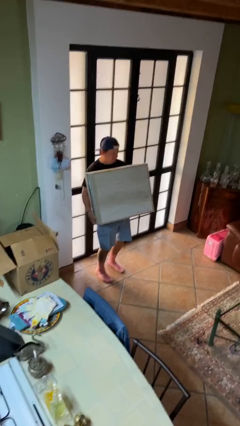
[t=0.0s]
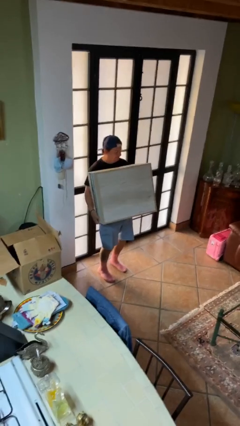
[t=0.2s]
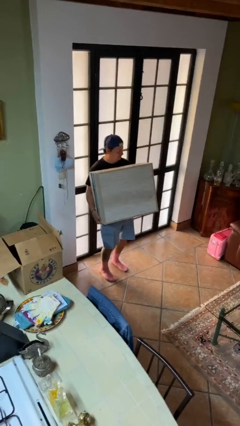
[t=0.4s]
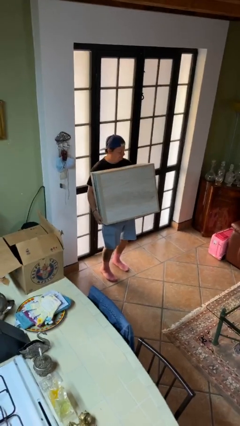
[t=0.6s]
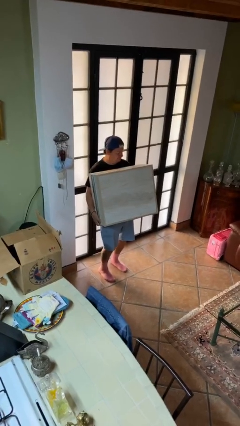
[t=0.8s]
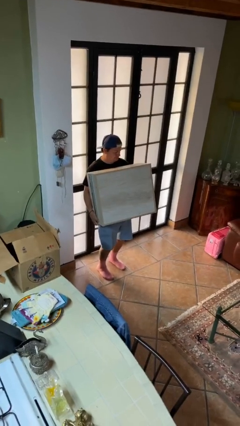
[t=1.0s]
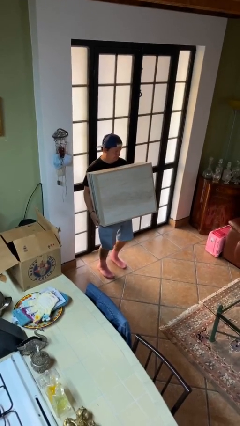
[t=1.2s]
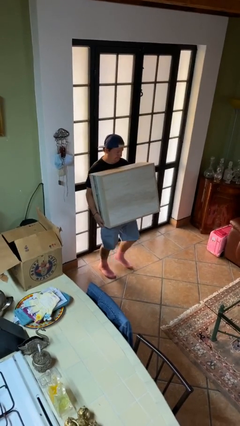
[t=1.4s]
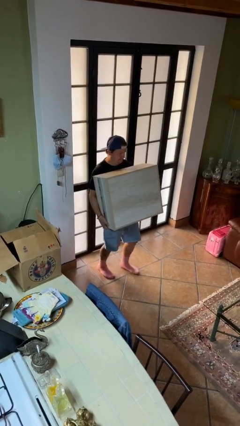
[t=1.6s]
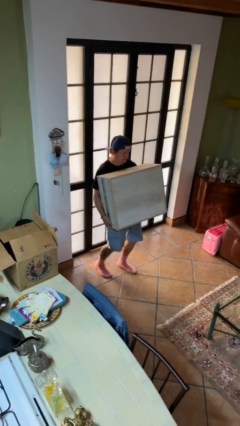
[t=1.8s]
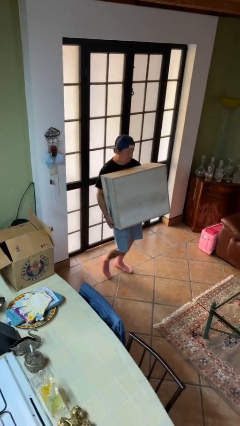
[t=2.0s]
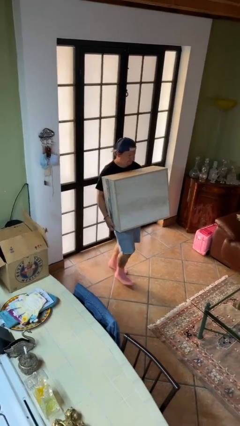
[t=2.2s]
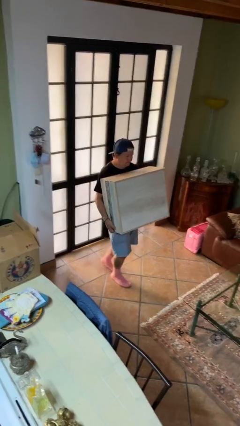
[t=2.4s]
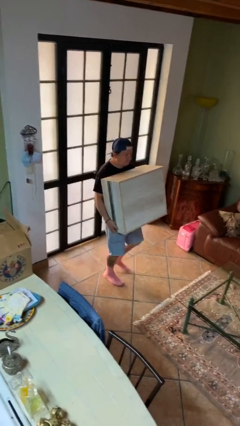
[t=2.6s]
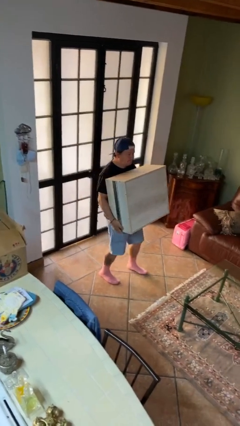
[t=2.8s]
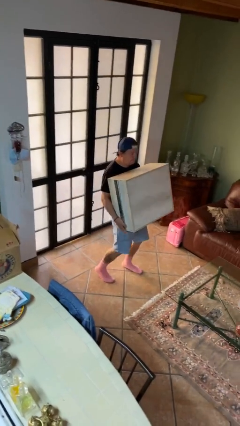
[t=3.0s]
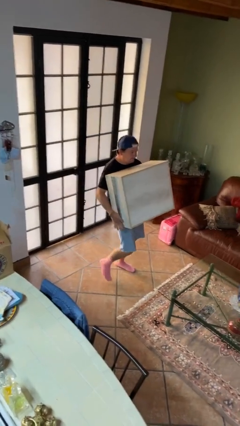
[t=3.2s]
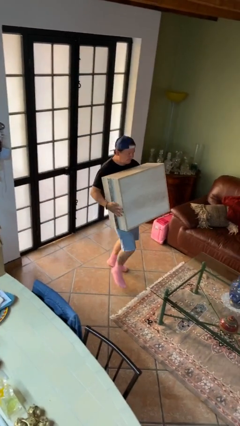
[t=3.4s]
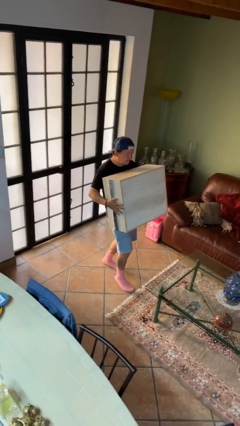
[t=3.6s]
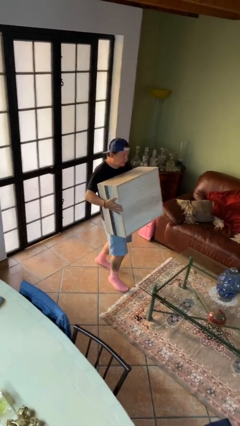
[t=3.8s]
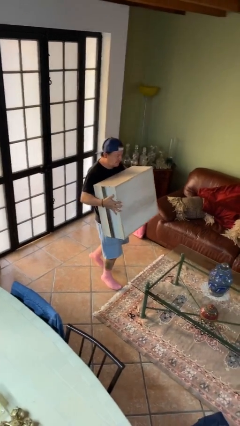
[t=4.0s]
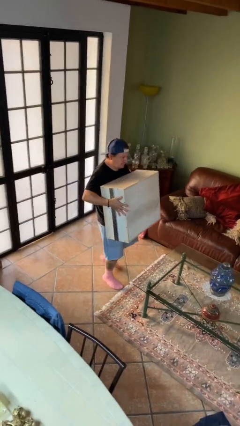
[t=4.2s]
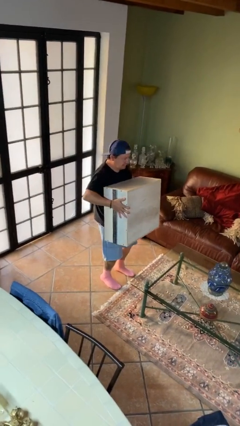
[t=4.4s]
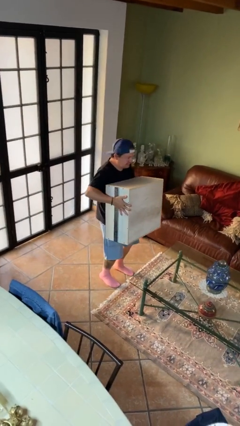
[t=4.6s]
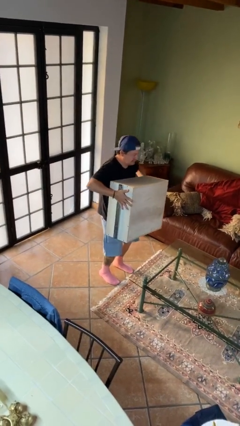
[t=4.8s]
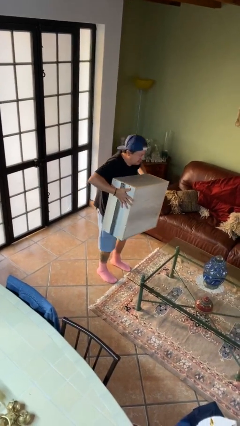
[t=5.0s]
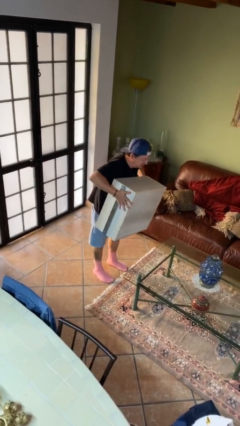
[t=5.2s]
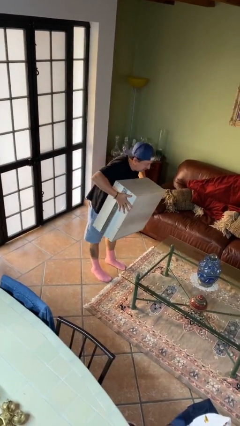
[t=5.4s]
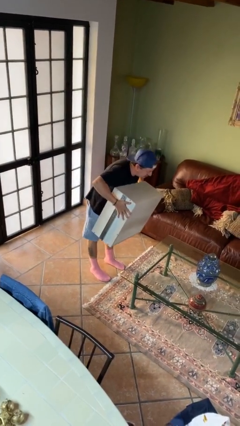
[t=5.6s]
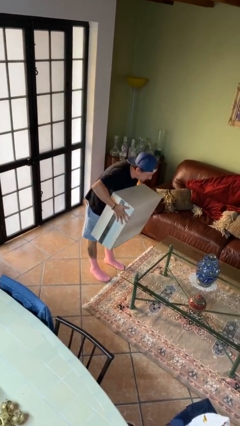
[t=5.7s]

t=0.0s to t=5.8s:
person carries heavy object

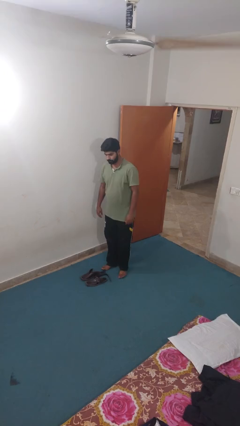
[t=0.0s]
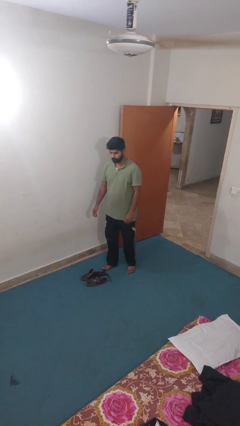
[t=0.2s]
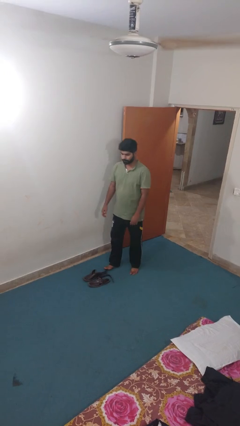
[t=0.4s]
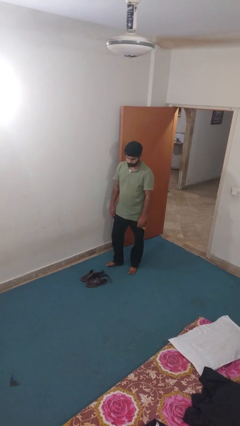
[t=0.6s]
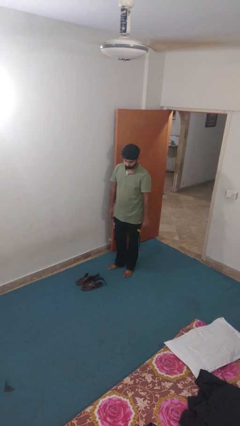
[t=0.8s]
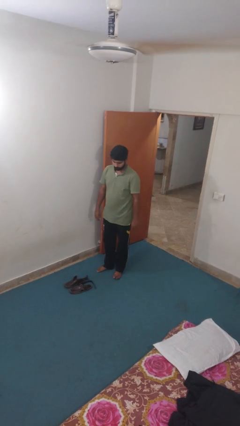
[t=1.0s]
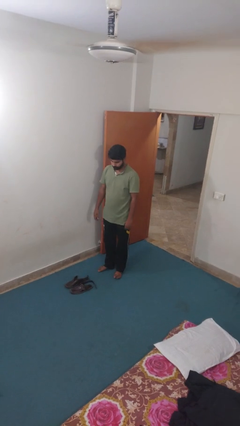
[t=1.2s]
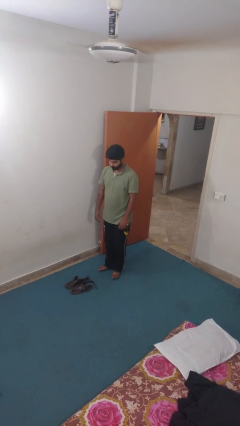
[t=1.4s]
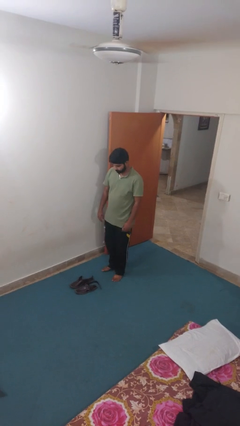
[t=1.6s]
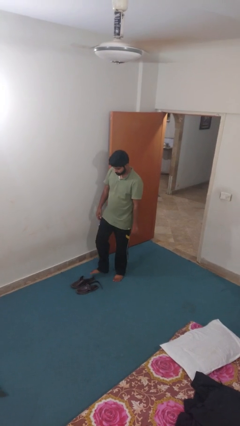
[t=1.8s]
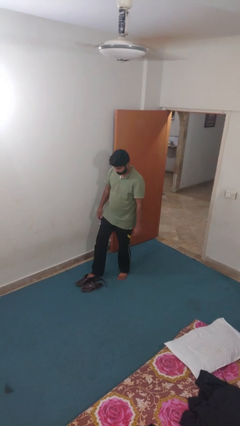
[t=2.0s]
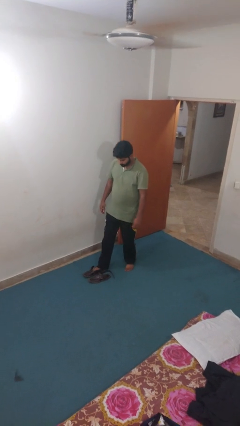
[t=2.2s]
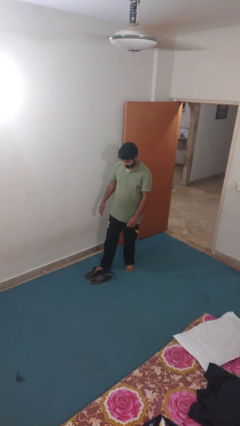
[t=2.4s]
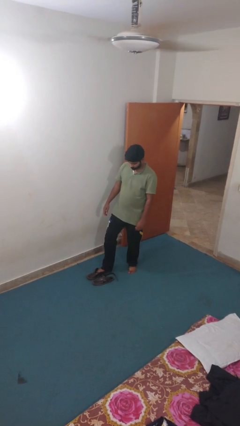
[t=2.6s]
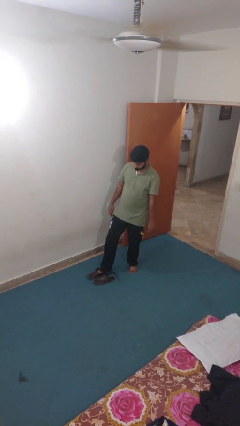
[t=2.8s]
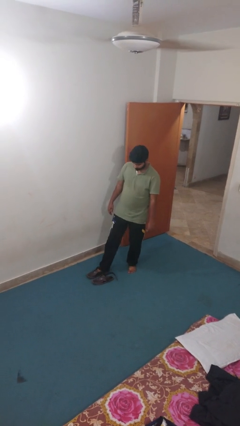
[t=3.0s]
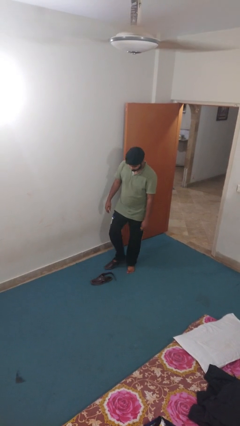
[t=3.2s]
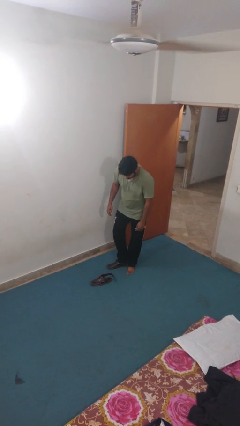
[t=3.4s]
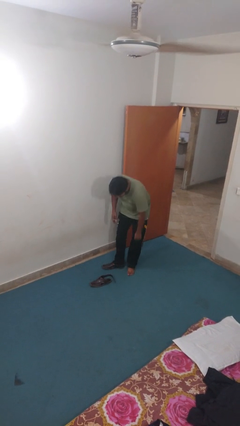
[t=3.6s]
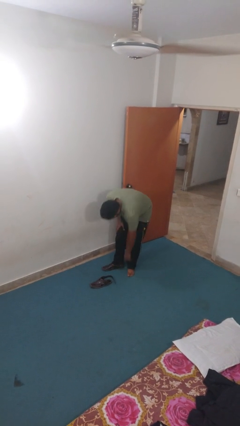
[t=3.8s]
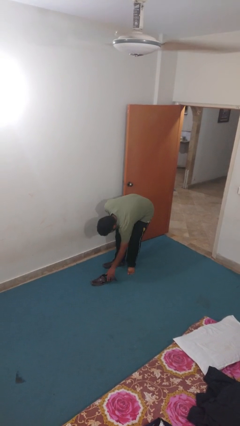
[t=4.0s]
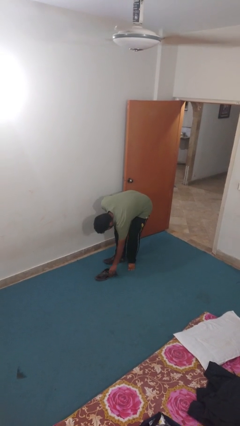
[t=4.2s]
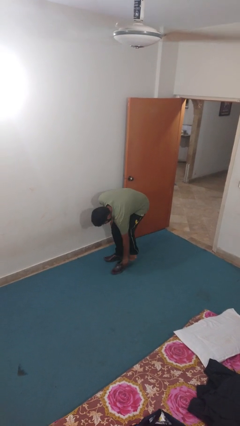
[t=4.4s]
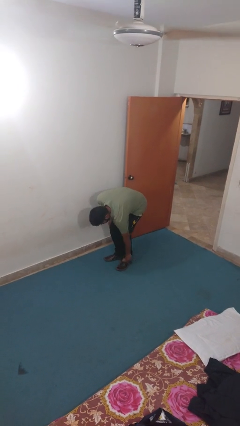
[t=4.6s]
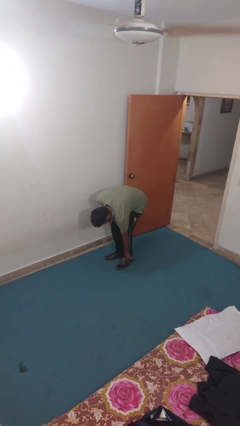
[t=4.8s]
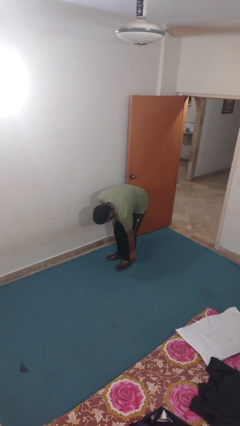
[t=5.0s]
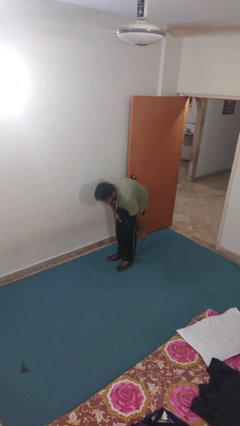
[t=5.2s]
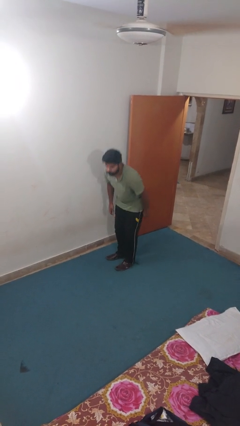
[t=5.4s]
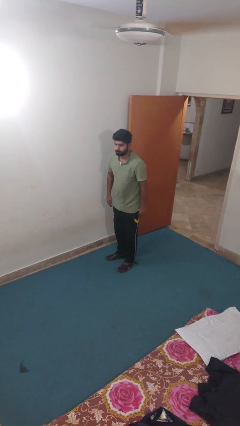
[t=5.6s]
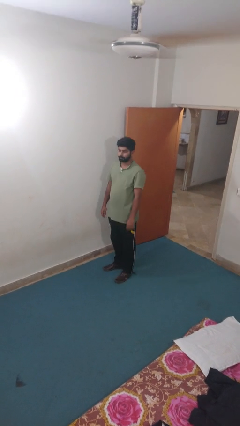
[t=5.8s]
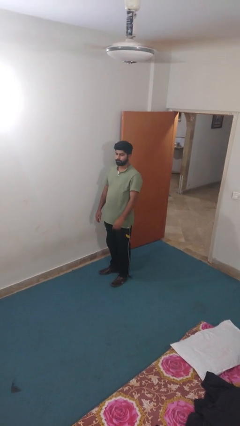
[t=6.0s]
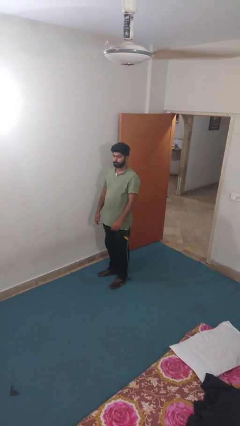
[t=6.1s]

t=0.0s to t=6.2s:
person puts on shoes

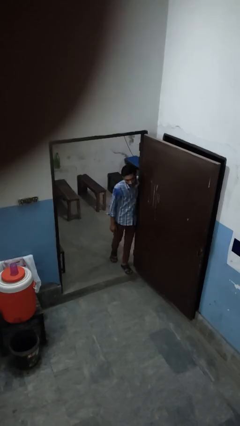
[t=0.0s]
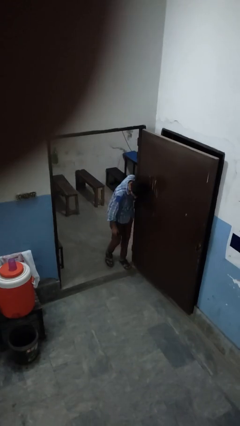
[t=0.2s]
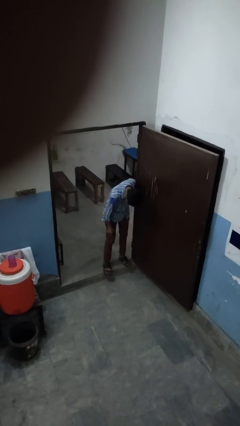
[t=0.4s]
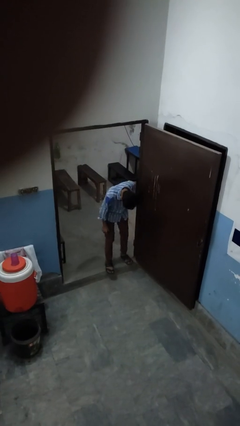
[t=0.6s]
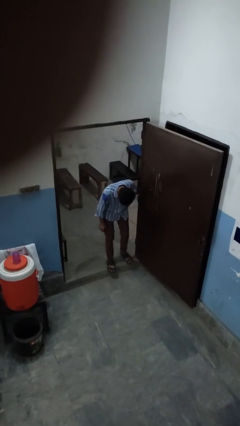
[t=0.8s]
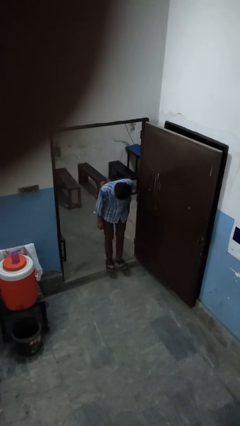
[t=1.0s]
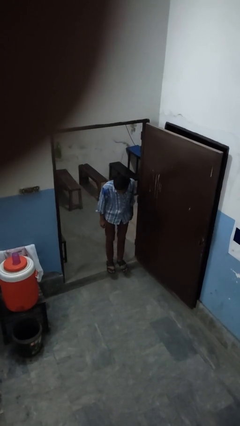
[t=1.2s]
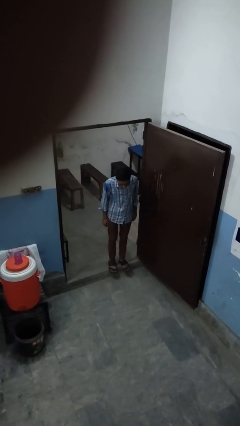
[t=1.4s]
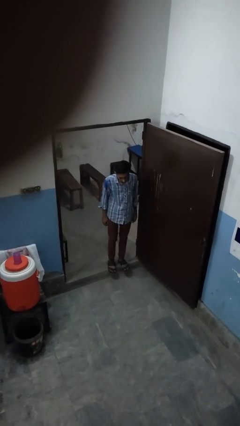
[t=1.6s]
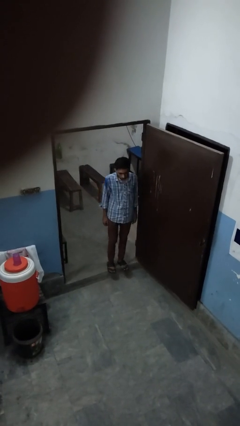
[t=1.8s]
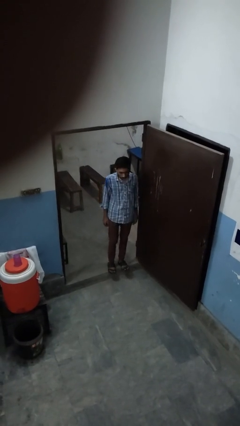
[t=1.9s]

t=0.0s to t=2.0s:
person bumps into wall

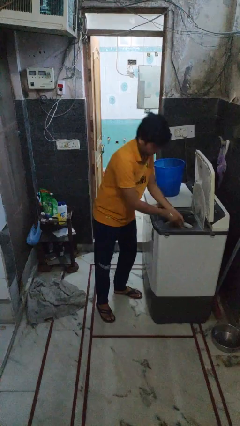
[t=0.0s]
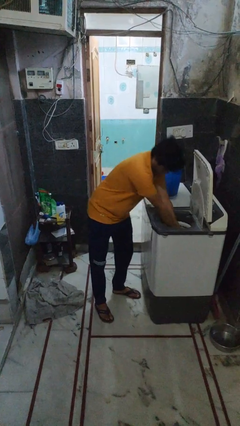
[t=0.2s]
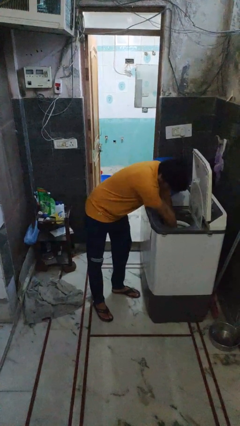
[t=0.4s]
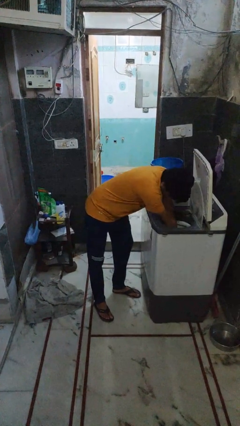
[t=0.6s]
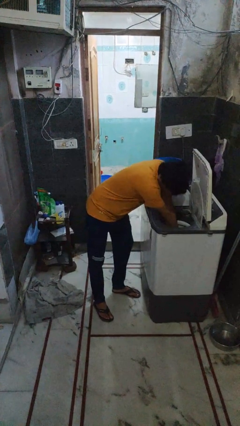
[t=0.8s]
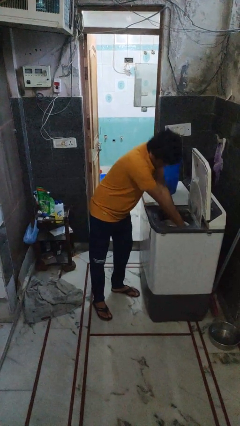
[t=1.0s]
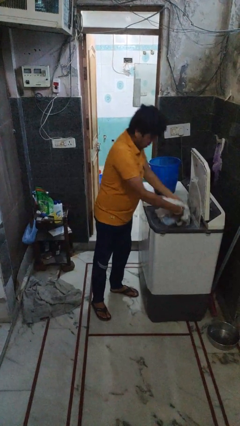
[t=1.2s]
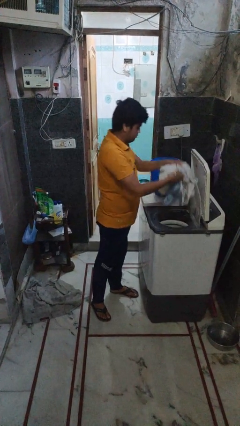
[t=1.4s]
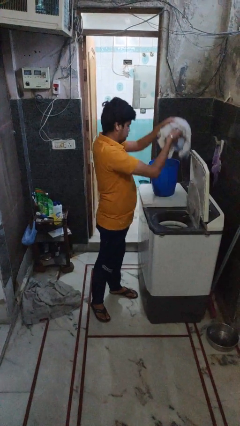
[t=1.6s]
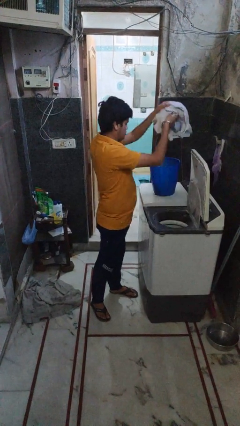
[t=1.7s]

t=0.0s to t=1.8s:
person unloads clotheswasher

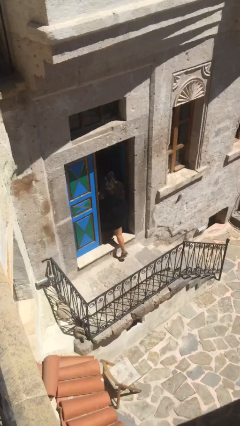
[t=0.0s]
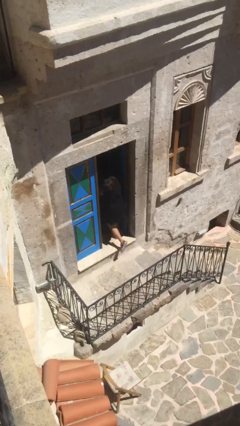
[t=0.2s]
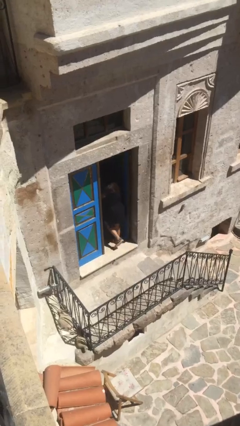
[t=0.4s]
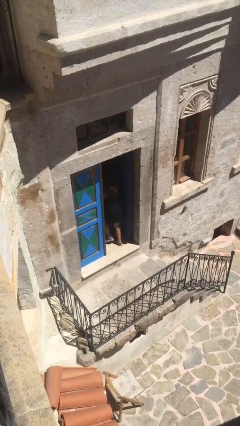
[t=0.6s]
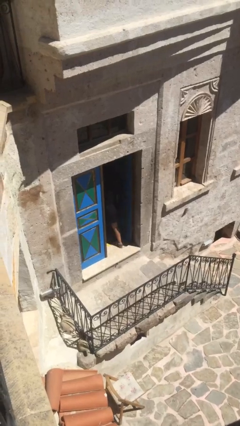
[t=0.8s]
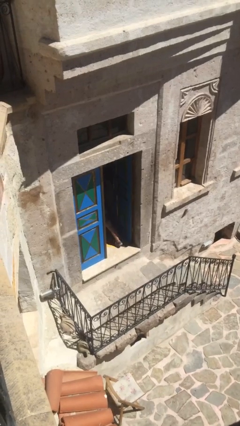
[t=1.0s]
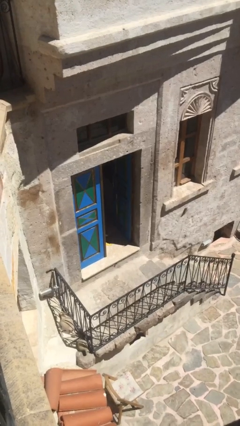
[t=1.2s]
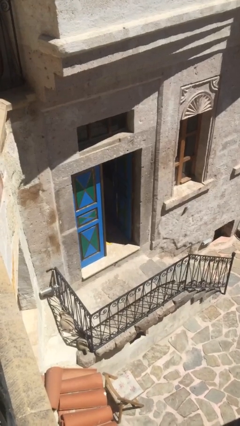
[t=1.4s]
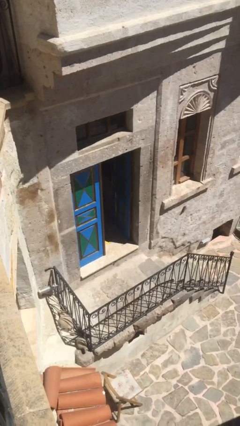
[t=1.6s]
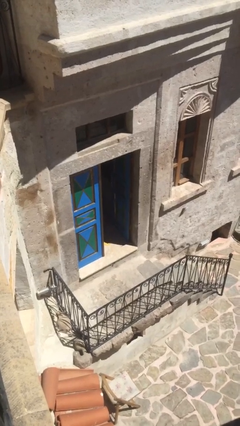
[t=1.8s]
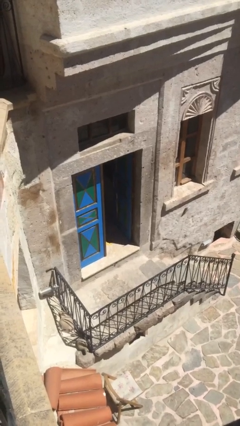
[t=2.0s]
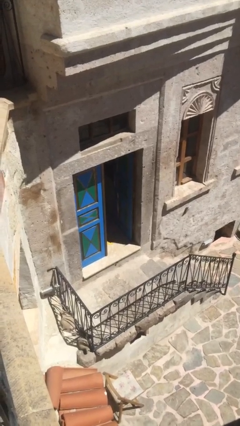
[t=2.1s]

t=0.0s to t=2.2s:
person exits scene through structure
